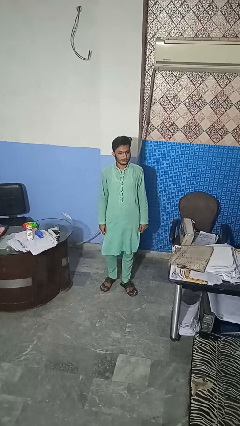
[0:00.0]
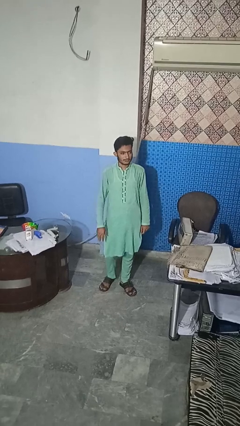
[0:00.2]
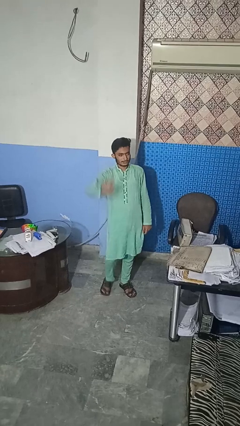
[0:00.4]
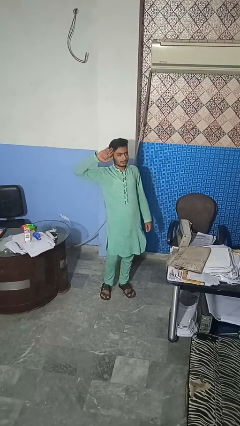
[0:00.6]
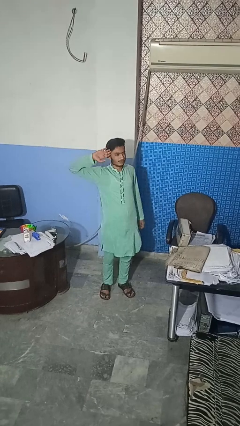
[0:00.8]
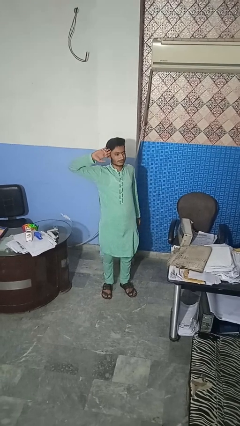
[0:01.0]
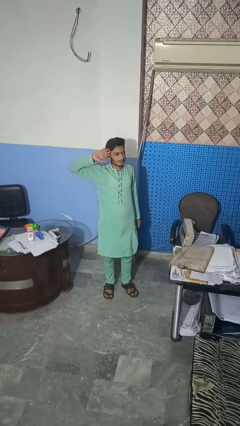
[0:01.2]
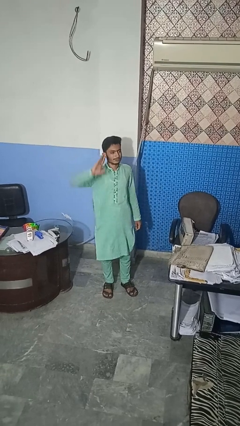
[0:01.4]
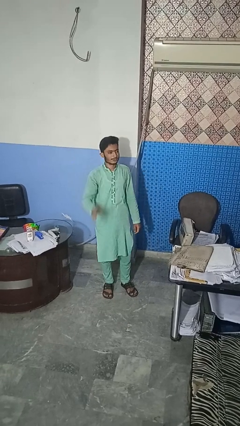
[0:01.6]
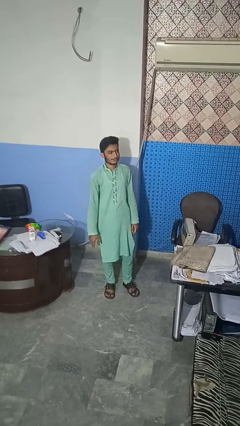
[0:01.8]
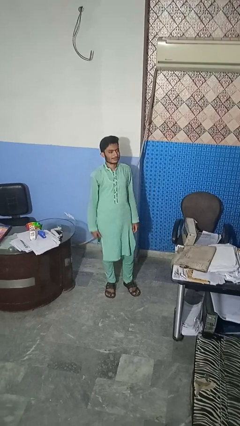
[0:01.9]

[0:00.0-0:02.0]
person salutes

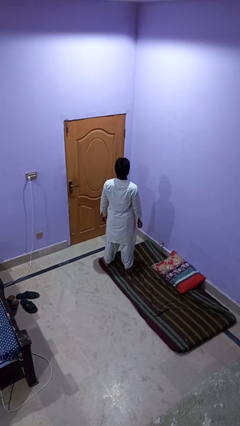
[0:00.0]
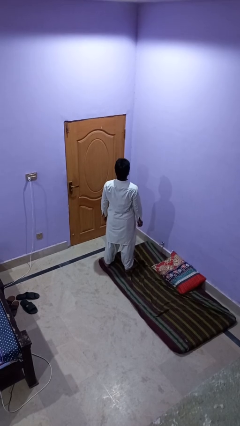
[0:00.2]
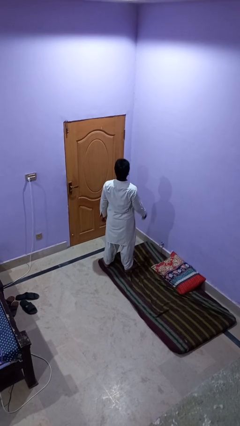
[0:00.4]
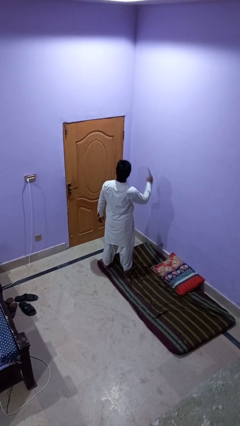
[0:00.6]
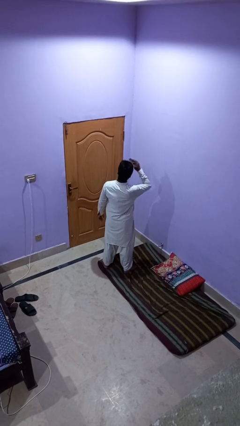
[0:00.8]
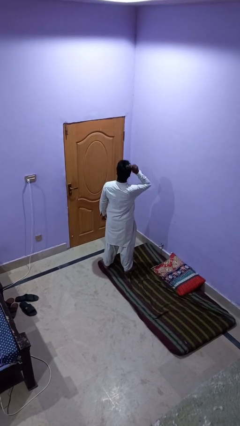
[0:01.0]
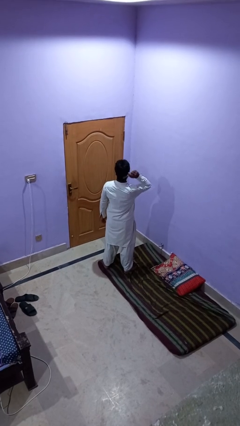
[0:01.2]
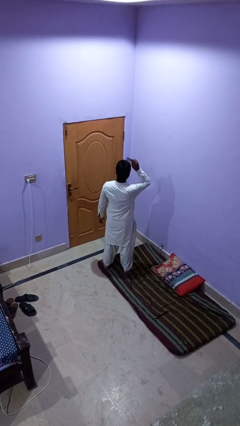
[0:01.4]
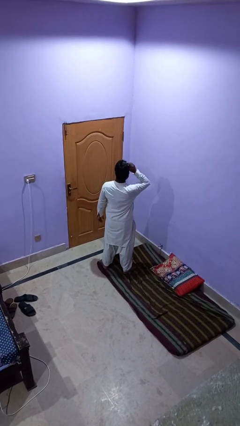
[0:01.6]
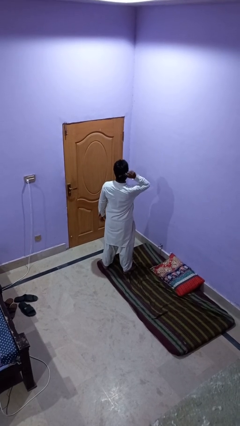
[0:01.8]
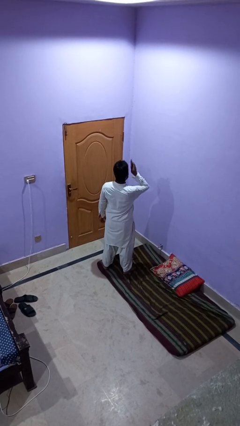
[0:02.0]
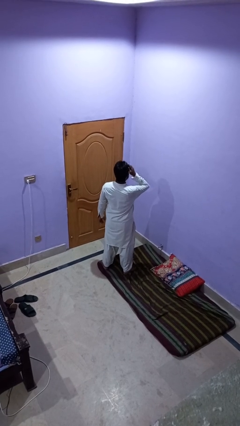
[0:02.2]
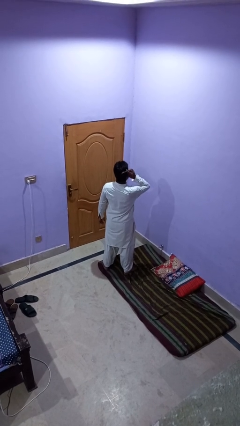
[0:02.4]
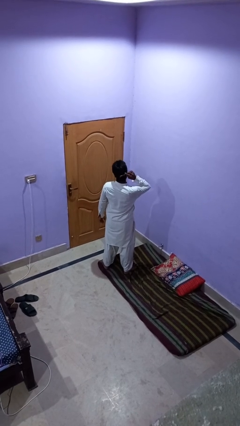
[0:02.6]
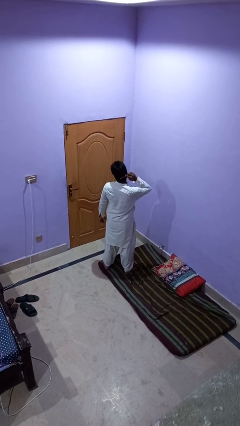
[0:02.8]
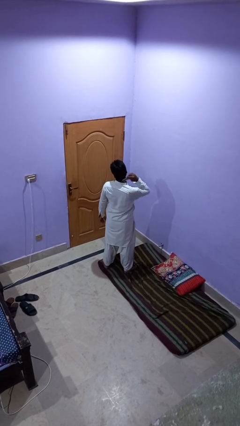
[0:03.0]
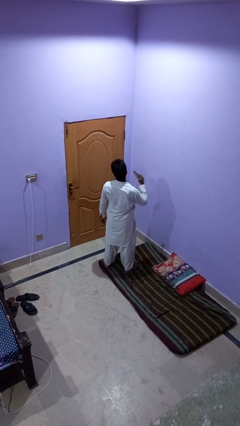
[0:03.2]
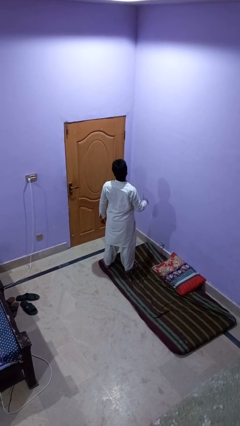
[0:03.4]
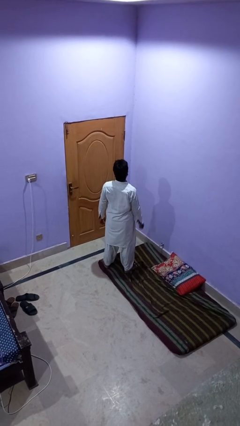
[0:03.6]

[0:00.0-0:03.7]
person brushes hair

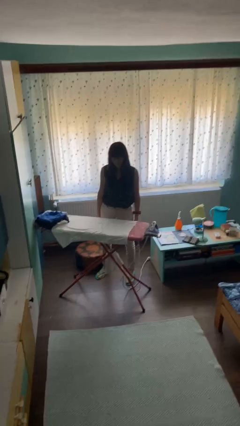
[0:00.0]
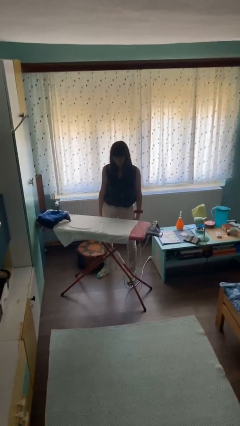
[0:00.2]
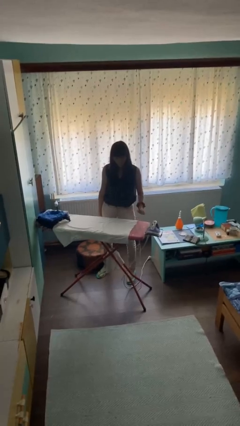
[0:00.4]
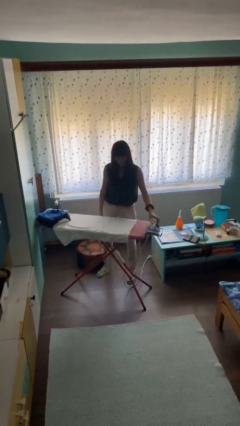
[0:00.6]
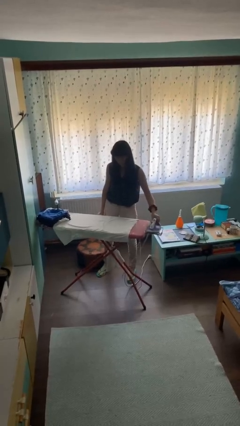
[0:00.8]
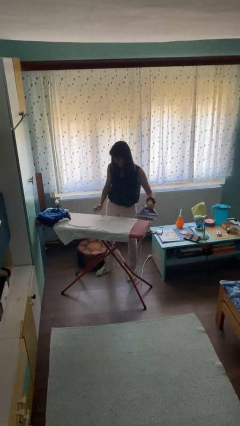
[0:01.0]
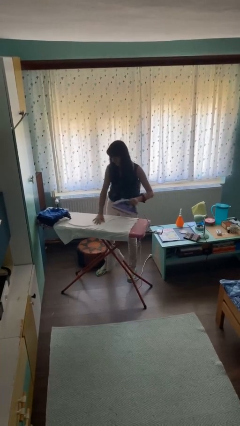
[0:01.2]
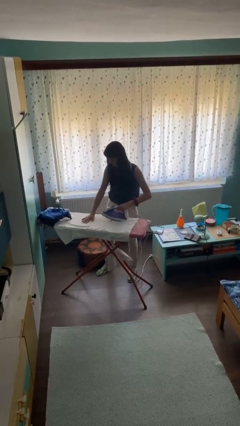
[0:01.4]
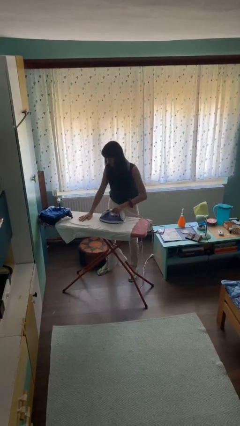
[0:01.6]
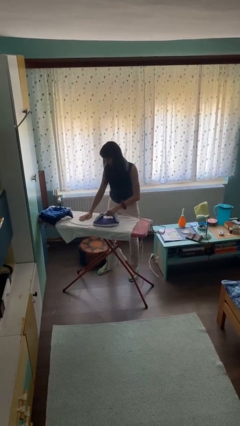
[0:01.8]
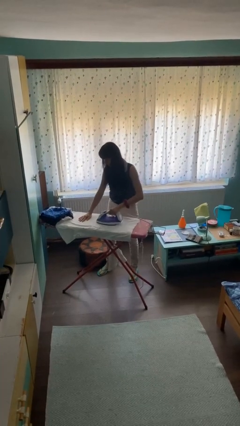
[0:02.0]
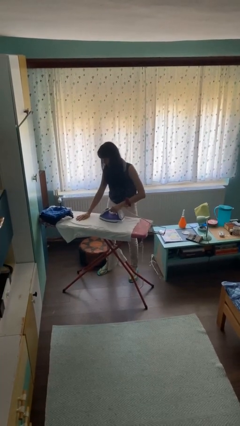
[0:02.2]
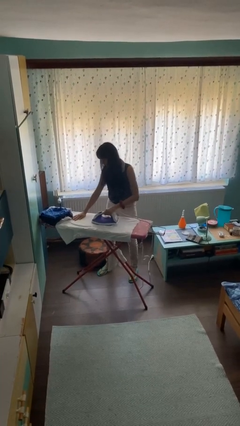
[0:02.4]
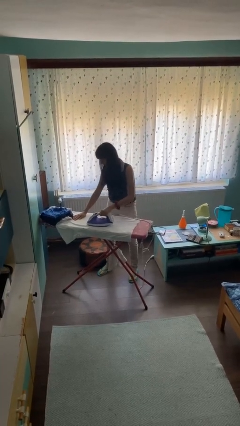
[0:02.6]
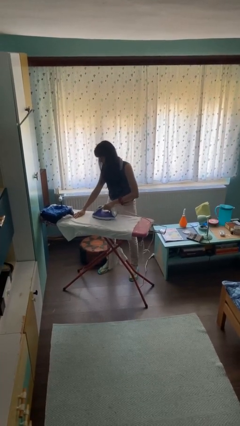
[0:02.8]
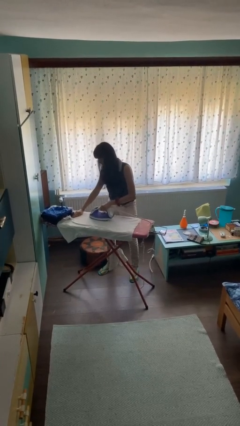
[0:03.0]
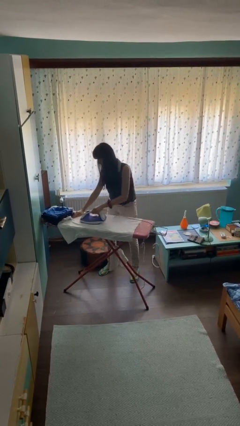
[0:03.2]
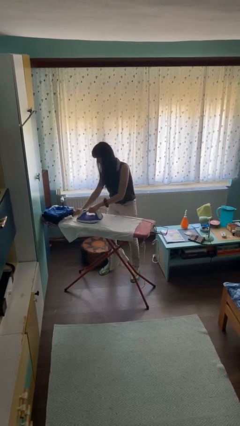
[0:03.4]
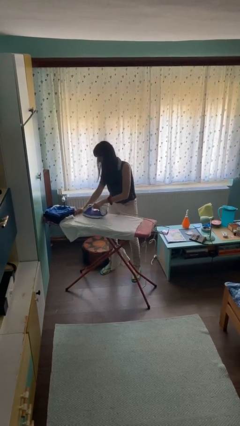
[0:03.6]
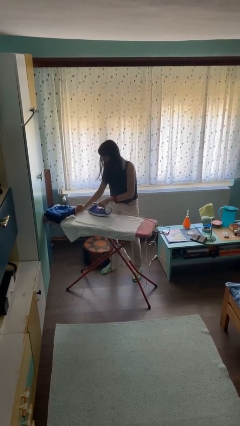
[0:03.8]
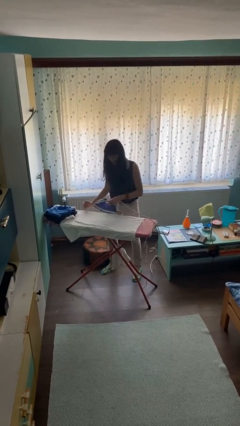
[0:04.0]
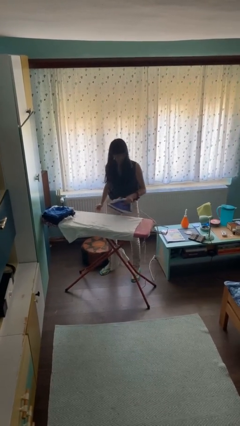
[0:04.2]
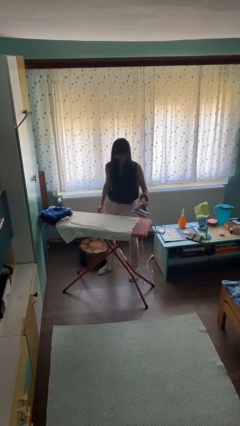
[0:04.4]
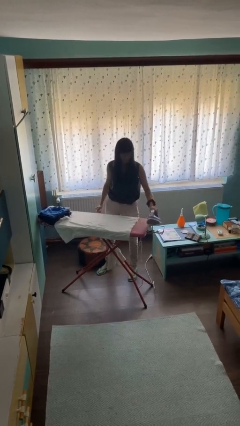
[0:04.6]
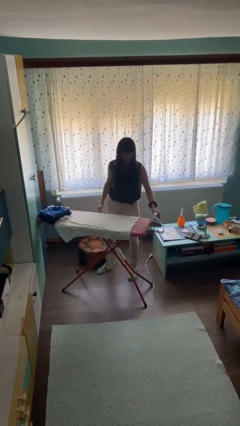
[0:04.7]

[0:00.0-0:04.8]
person irons clothes

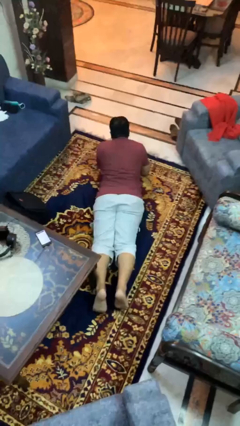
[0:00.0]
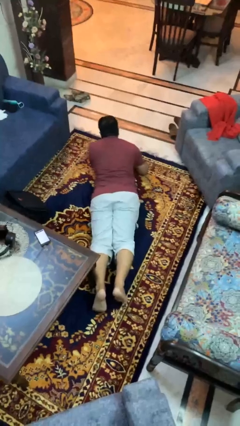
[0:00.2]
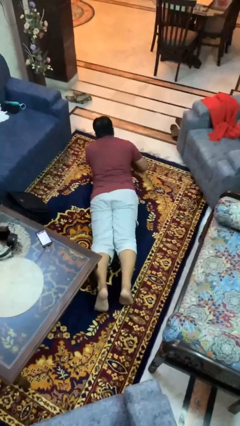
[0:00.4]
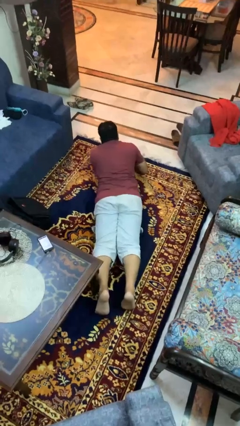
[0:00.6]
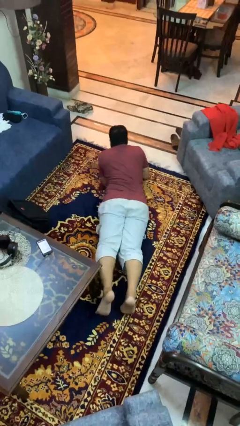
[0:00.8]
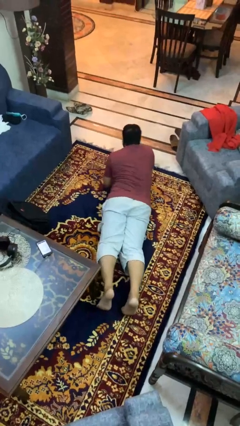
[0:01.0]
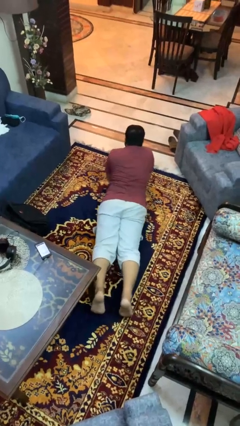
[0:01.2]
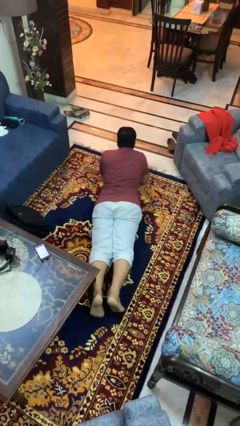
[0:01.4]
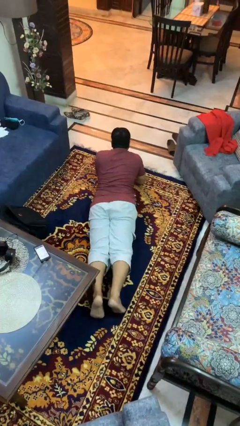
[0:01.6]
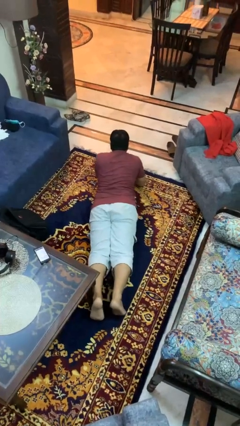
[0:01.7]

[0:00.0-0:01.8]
person crawls

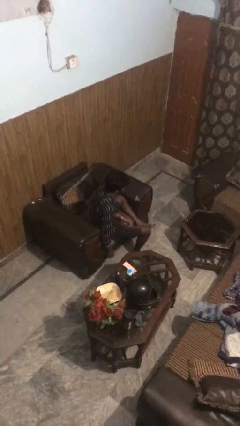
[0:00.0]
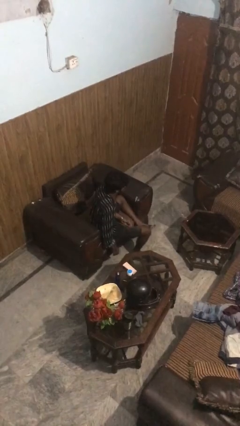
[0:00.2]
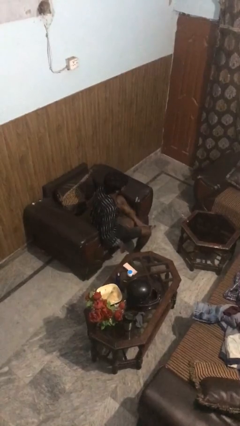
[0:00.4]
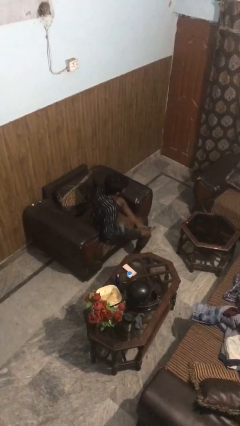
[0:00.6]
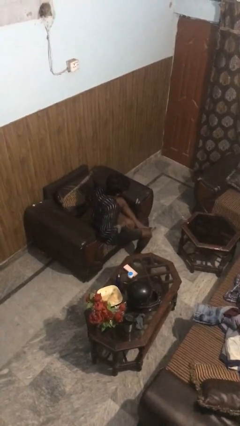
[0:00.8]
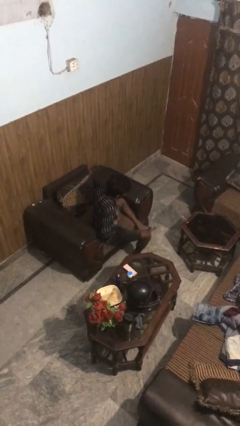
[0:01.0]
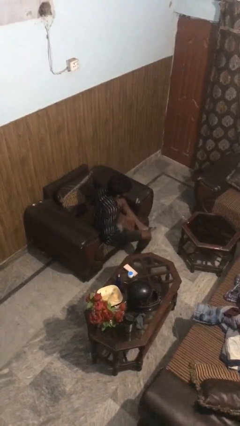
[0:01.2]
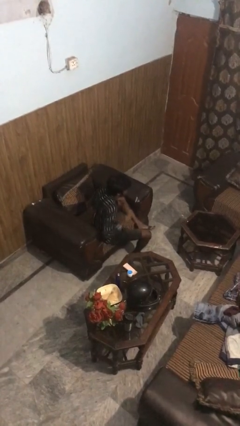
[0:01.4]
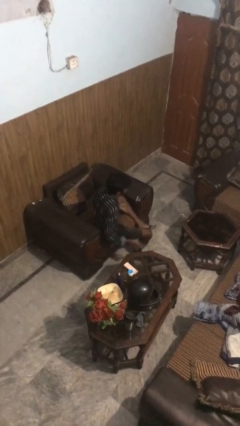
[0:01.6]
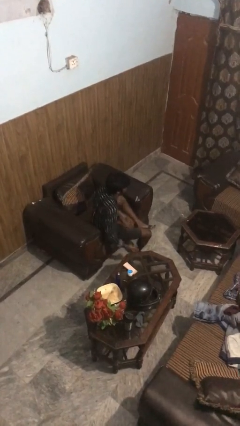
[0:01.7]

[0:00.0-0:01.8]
person drums on chest

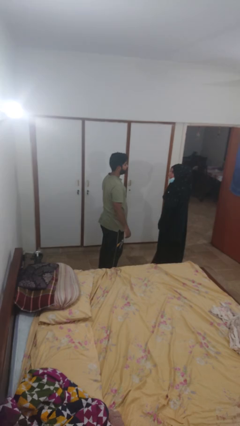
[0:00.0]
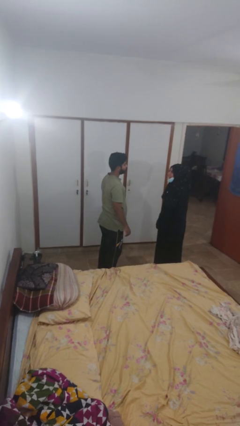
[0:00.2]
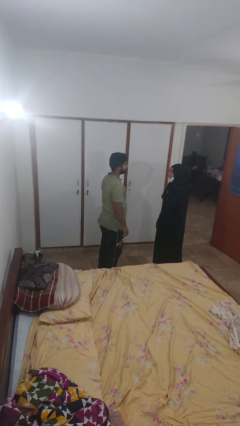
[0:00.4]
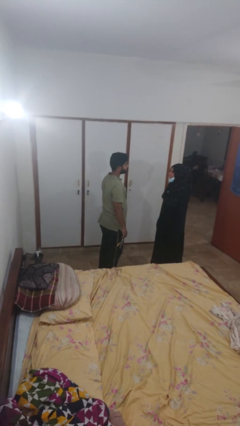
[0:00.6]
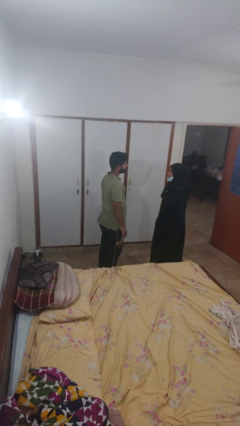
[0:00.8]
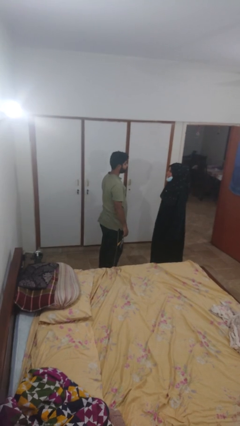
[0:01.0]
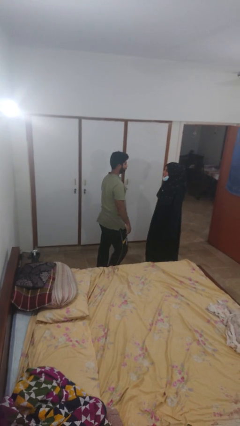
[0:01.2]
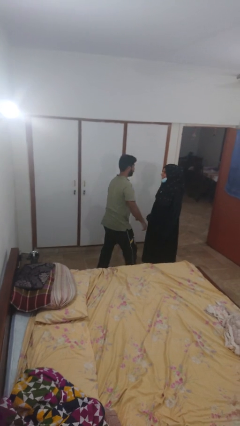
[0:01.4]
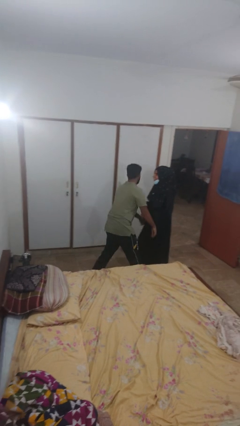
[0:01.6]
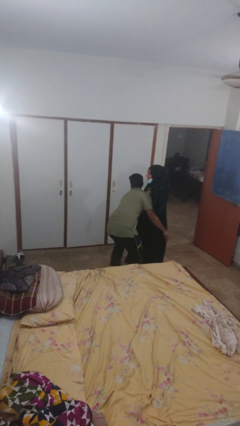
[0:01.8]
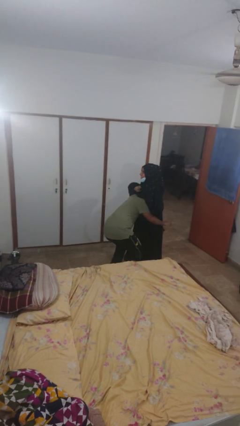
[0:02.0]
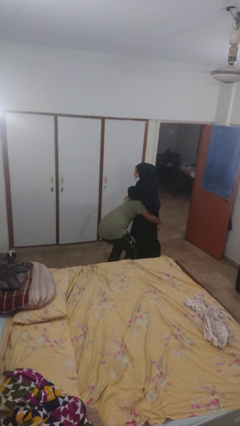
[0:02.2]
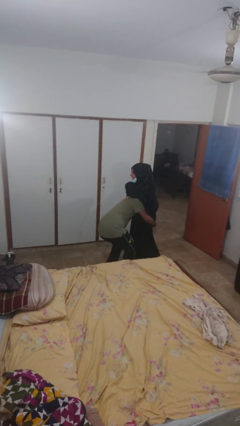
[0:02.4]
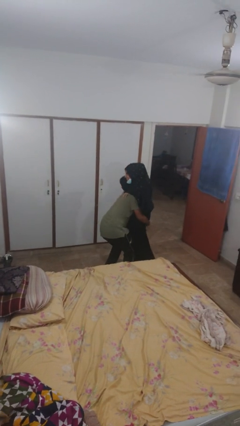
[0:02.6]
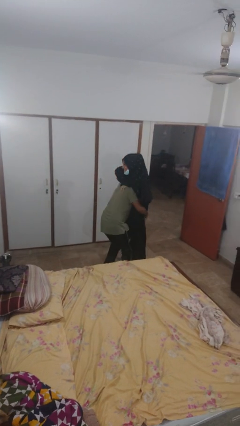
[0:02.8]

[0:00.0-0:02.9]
person picks up person

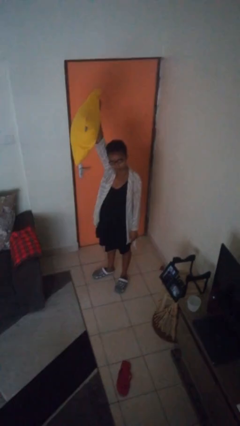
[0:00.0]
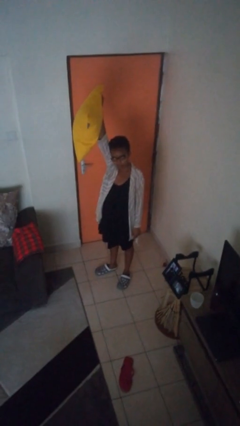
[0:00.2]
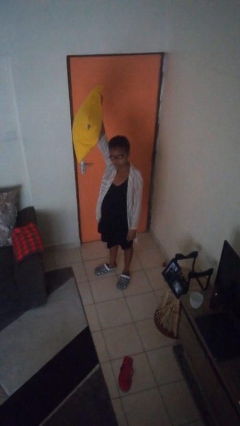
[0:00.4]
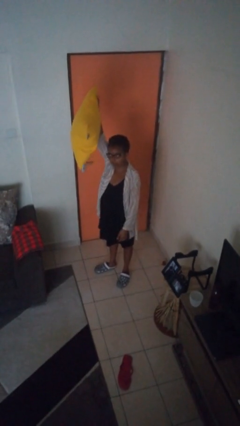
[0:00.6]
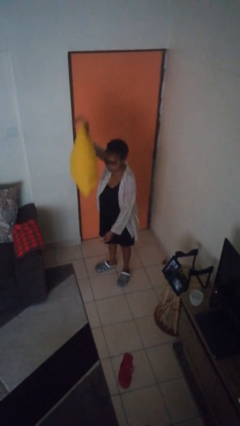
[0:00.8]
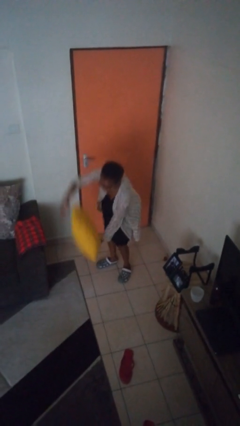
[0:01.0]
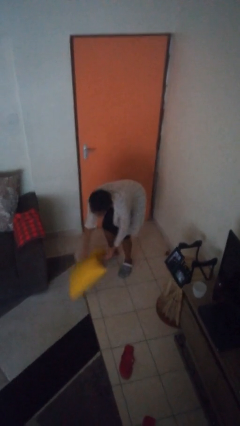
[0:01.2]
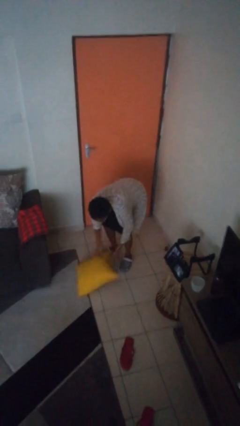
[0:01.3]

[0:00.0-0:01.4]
person drops object
